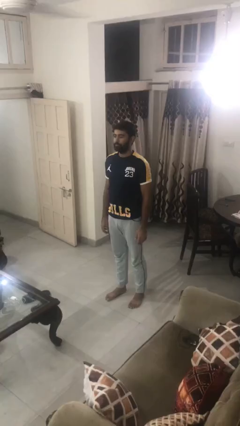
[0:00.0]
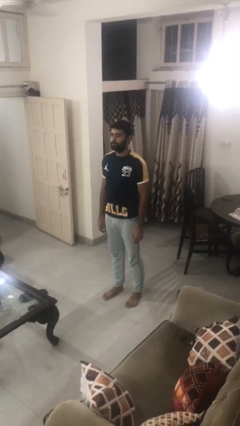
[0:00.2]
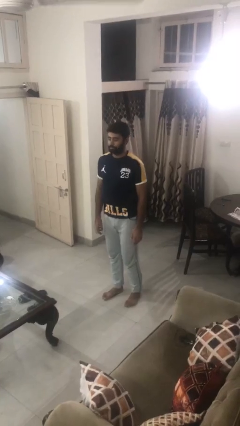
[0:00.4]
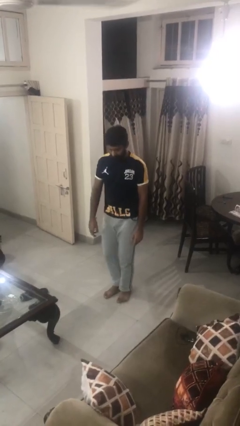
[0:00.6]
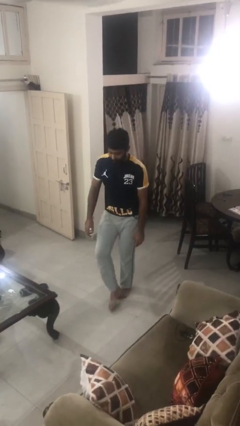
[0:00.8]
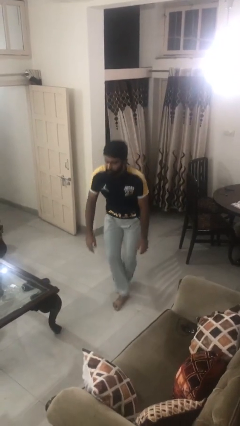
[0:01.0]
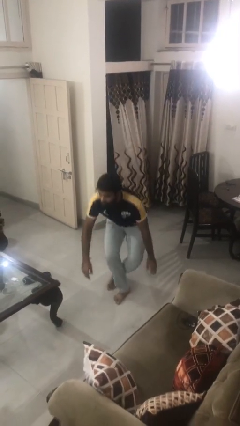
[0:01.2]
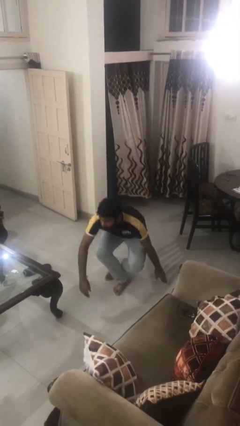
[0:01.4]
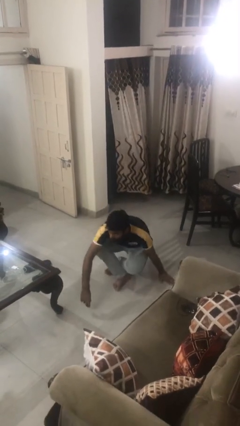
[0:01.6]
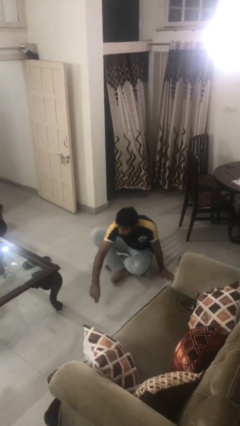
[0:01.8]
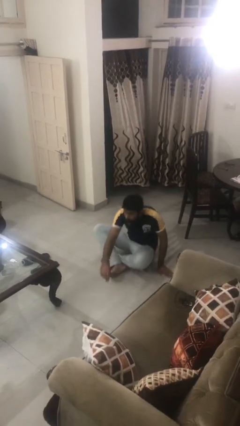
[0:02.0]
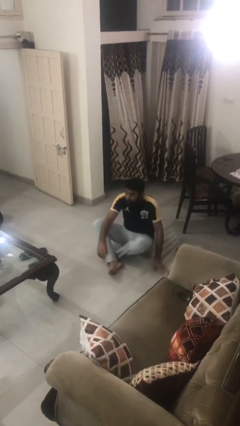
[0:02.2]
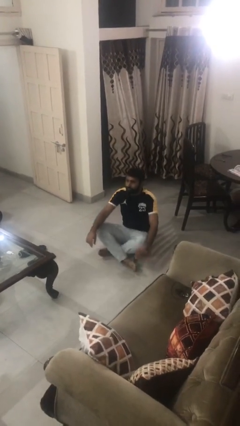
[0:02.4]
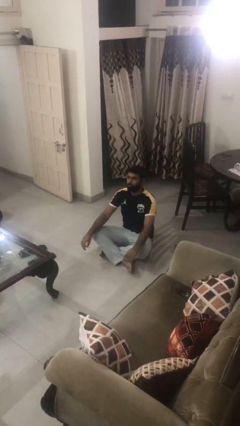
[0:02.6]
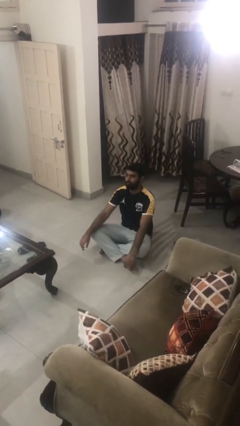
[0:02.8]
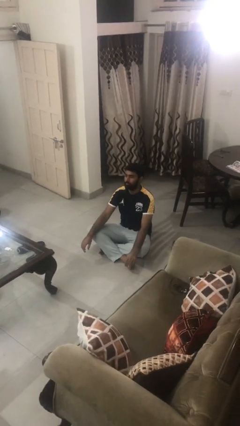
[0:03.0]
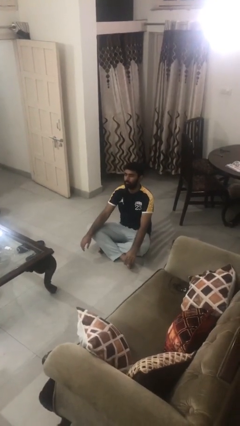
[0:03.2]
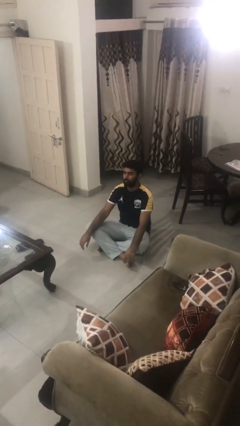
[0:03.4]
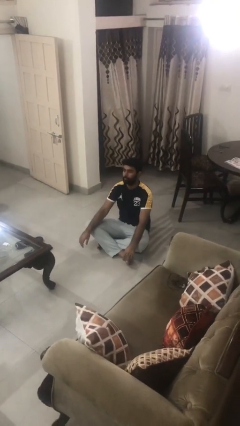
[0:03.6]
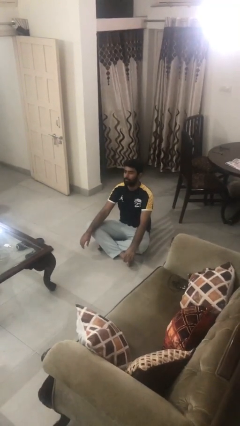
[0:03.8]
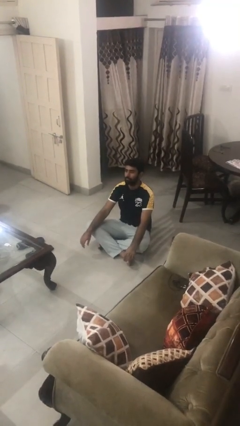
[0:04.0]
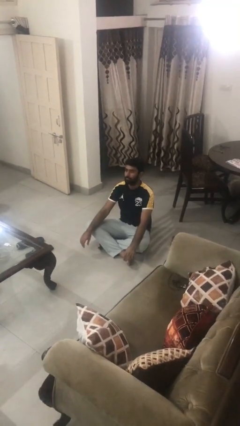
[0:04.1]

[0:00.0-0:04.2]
person sits crisscross

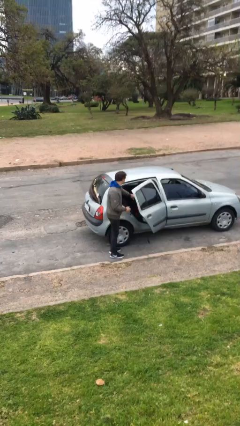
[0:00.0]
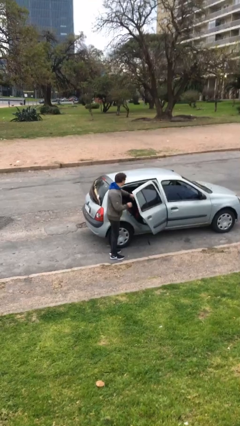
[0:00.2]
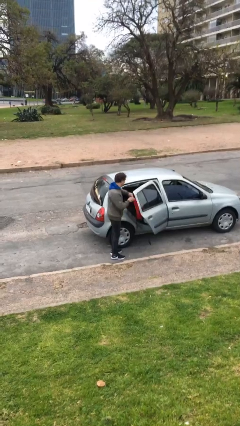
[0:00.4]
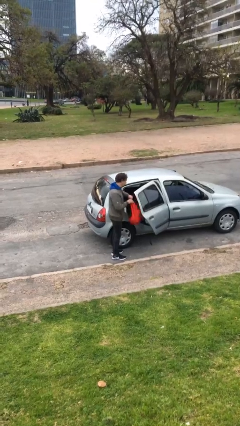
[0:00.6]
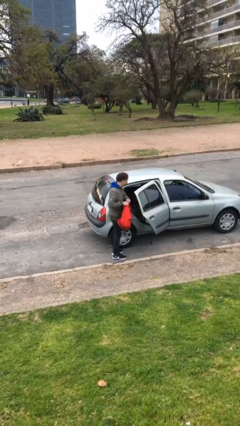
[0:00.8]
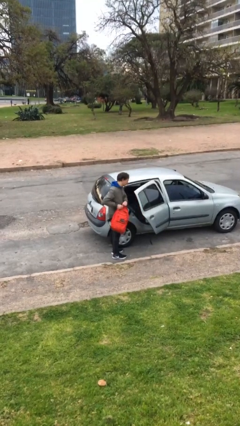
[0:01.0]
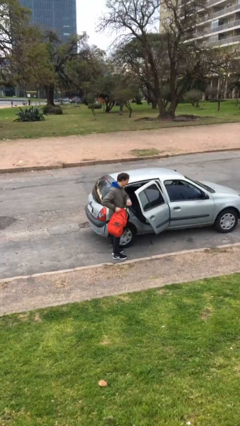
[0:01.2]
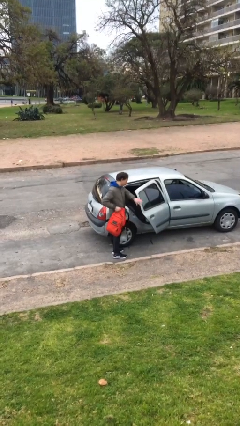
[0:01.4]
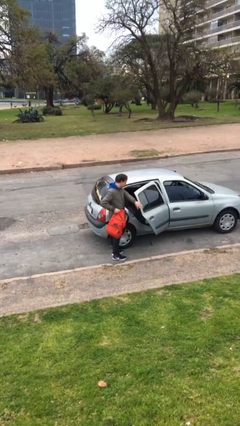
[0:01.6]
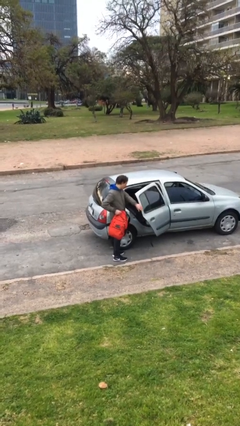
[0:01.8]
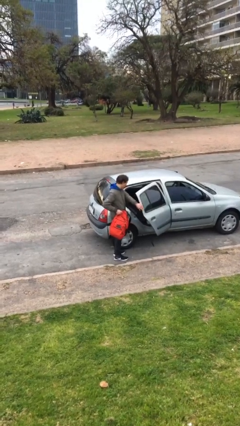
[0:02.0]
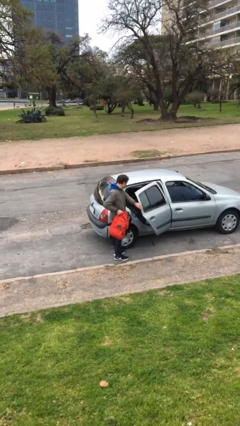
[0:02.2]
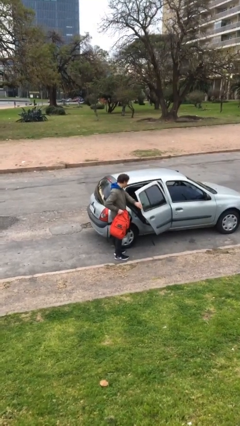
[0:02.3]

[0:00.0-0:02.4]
person unloads car

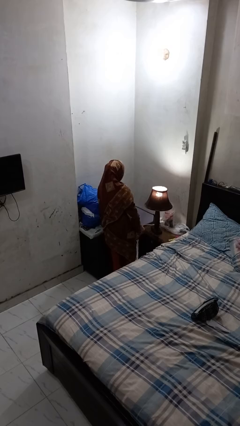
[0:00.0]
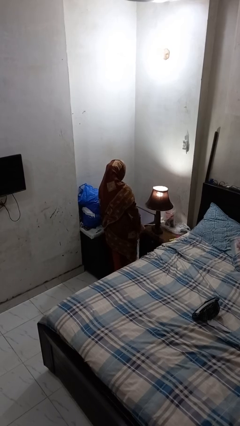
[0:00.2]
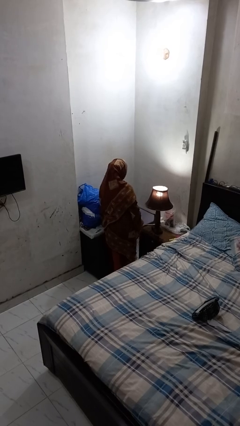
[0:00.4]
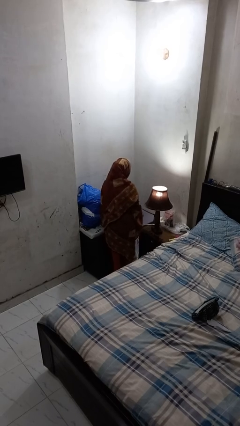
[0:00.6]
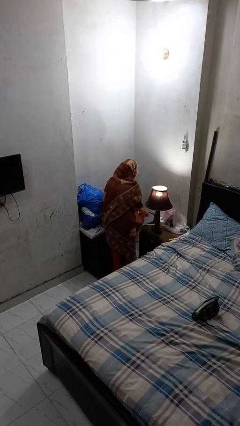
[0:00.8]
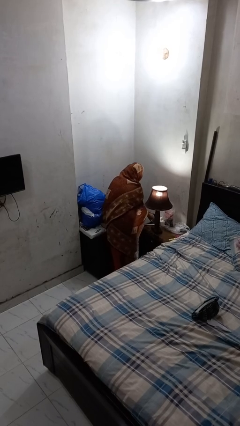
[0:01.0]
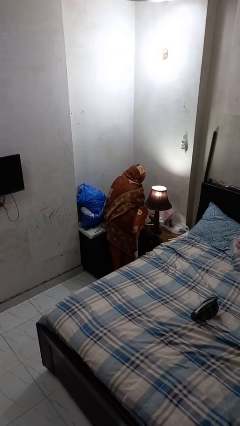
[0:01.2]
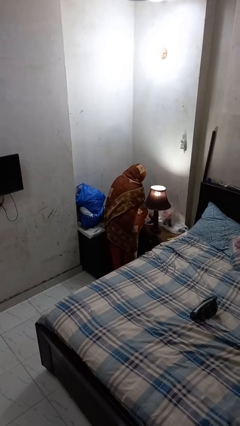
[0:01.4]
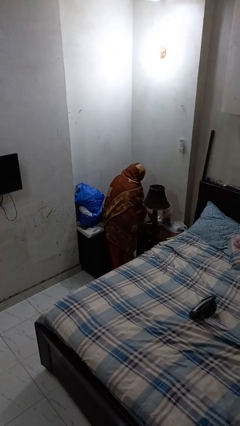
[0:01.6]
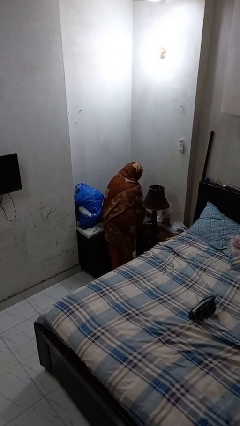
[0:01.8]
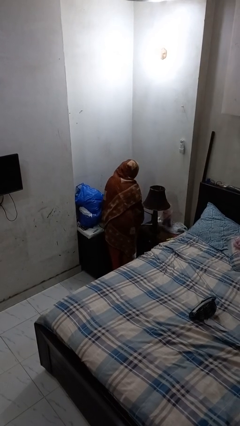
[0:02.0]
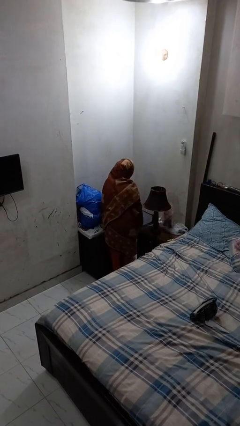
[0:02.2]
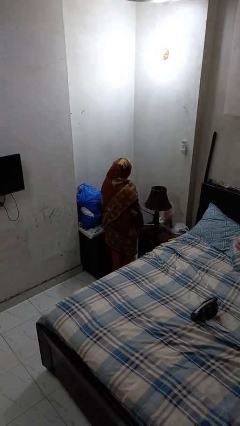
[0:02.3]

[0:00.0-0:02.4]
person turns off lamp

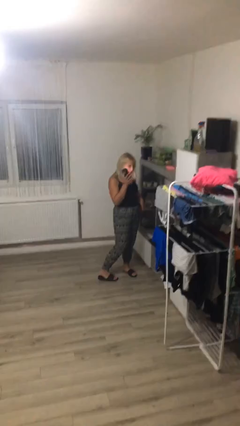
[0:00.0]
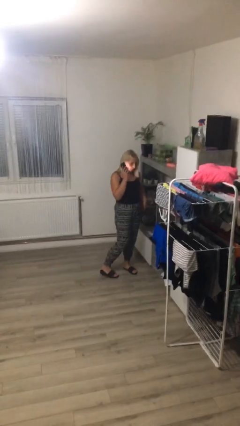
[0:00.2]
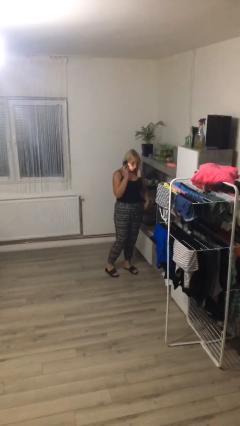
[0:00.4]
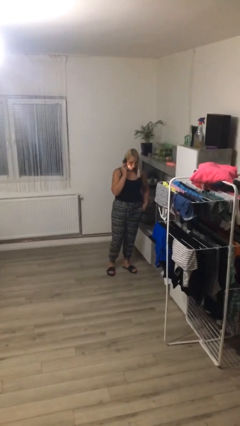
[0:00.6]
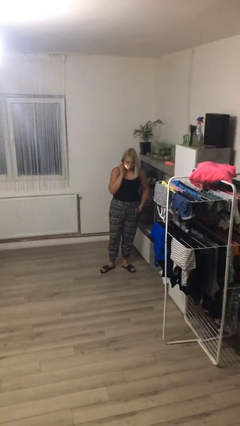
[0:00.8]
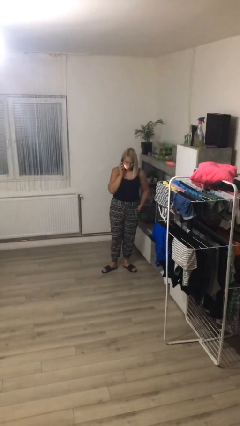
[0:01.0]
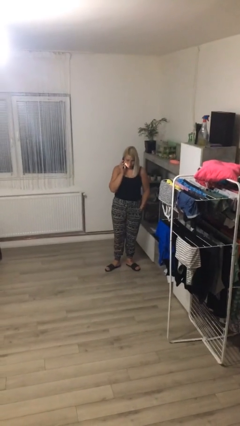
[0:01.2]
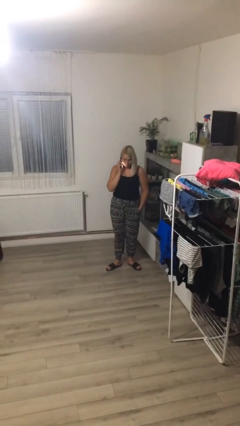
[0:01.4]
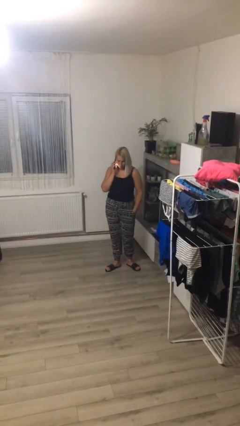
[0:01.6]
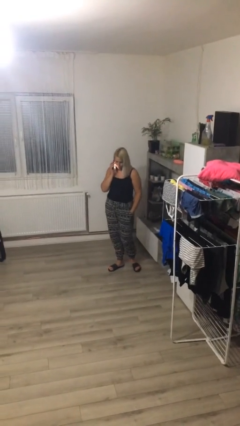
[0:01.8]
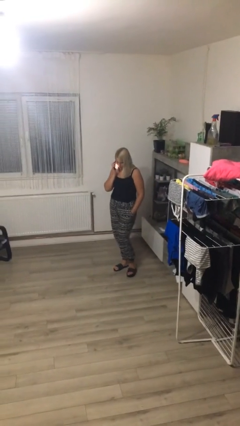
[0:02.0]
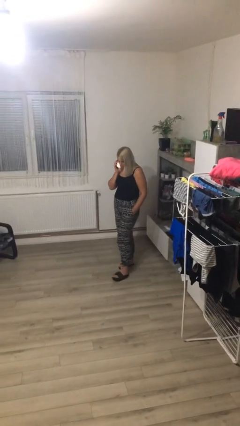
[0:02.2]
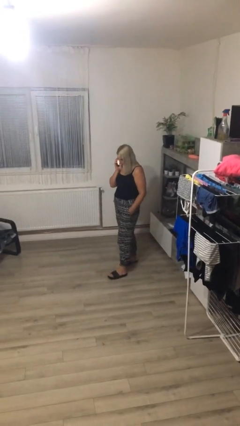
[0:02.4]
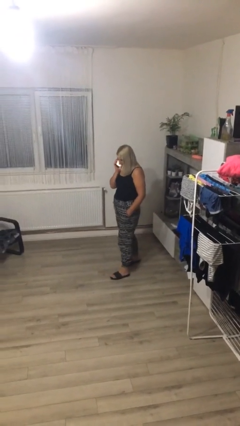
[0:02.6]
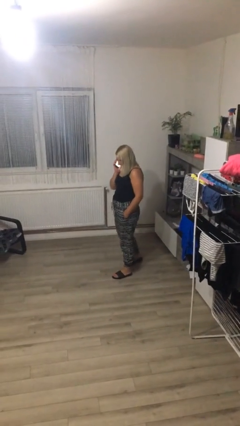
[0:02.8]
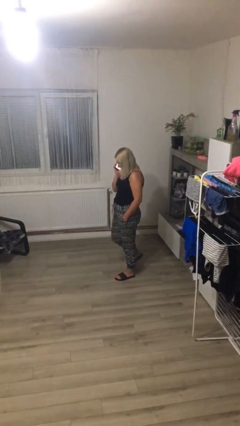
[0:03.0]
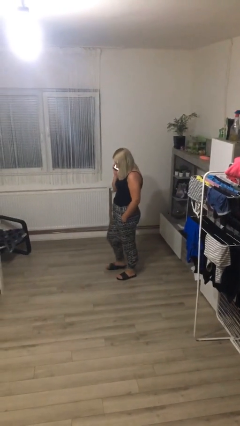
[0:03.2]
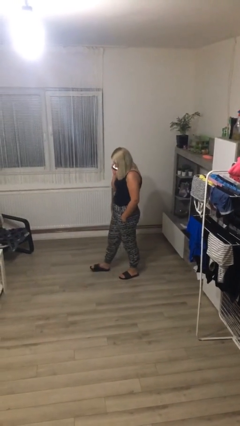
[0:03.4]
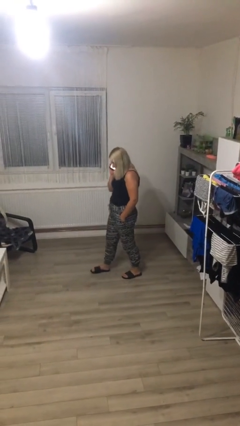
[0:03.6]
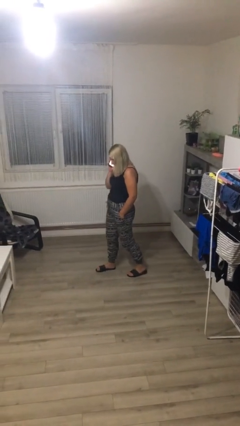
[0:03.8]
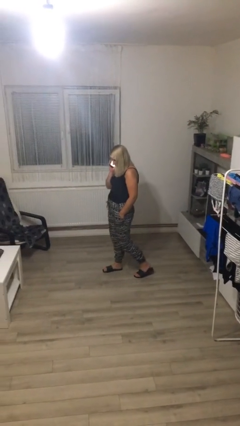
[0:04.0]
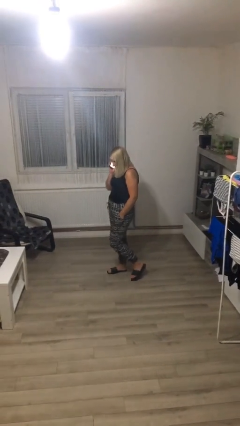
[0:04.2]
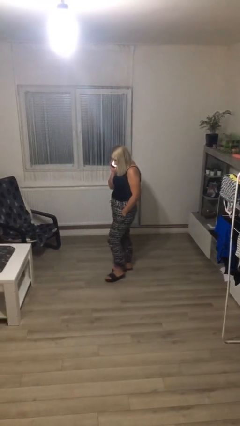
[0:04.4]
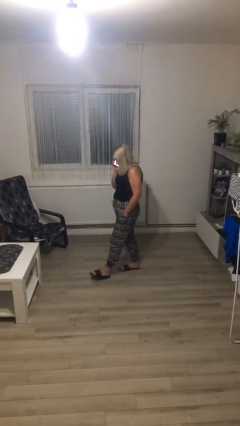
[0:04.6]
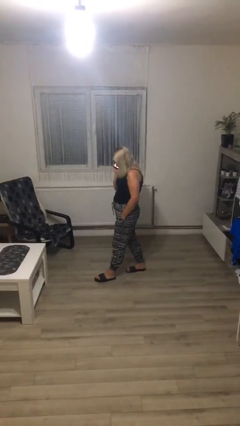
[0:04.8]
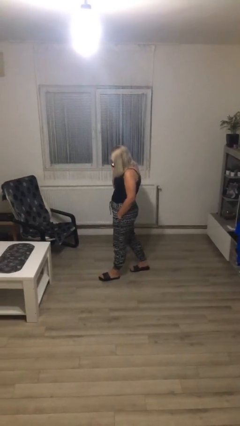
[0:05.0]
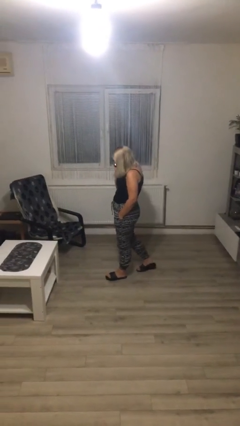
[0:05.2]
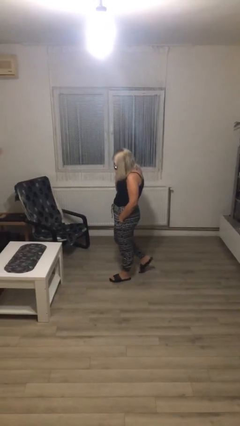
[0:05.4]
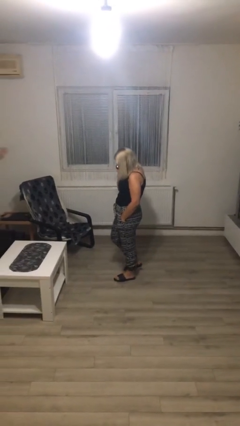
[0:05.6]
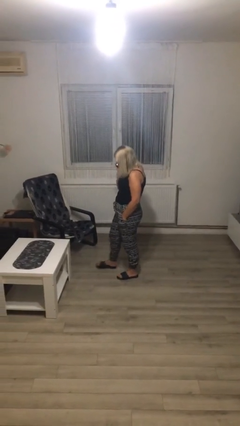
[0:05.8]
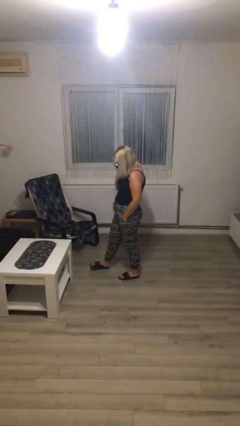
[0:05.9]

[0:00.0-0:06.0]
person talks on phone

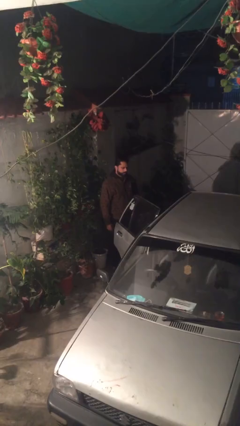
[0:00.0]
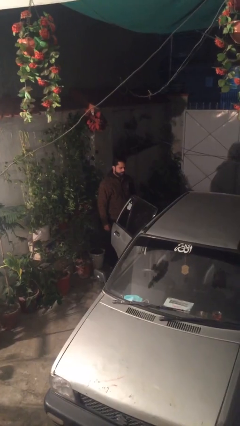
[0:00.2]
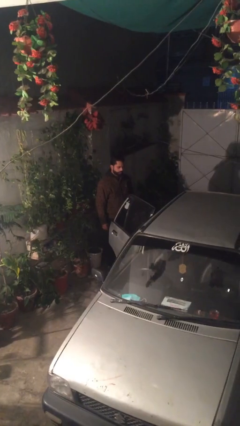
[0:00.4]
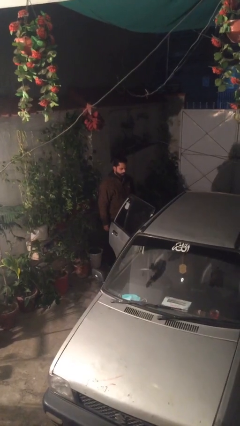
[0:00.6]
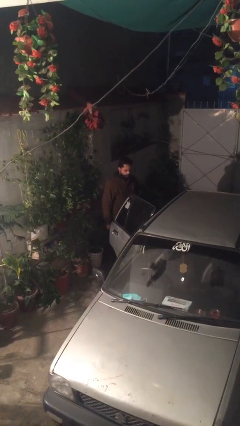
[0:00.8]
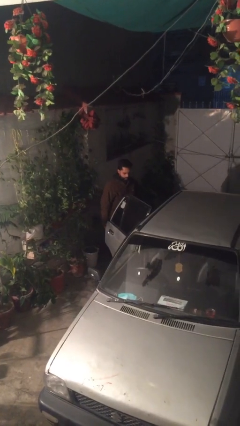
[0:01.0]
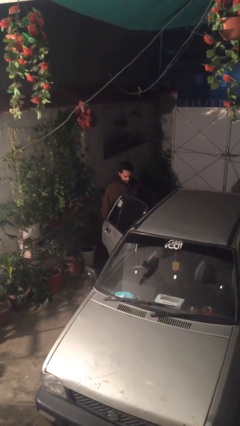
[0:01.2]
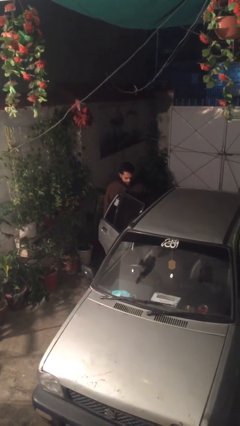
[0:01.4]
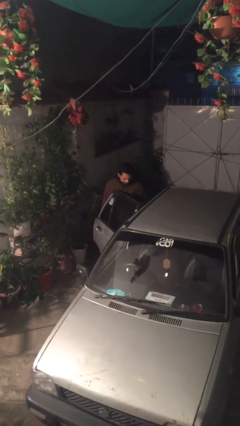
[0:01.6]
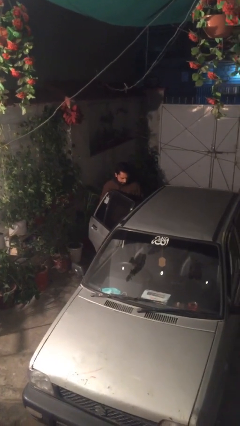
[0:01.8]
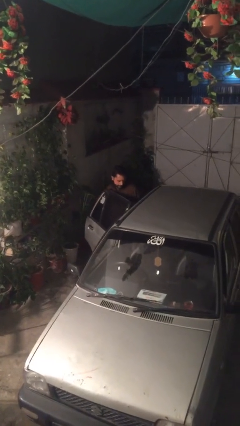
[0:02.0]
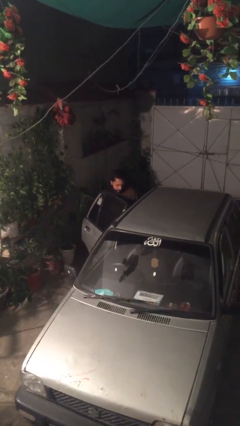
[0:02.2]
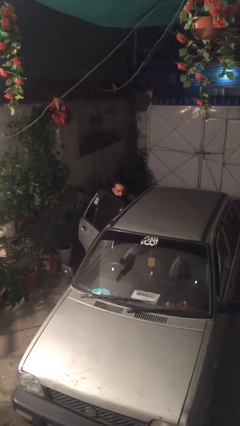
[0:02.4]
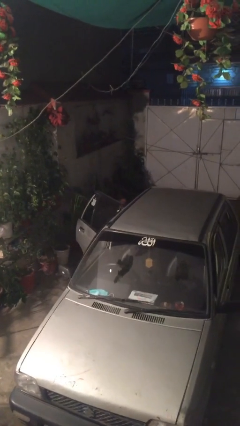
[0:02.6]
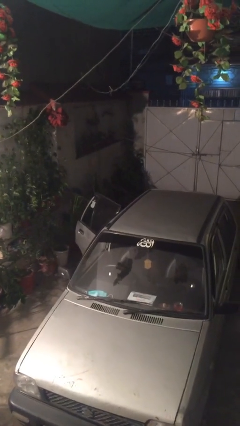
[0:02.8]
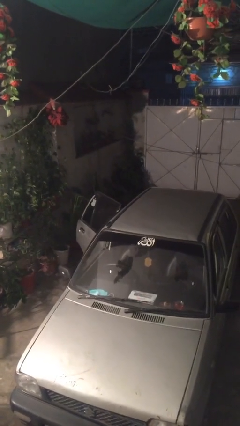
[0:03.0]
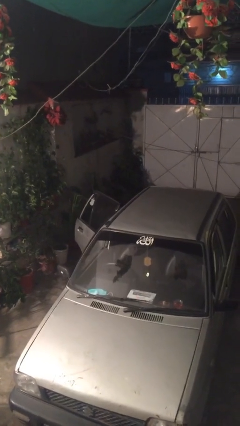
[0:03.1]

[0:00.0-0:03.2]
person enters car
